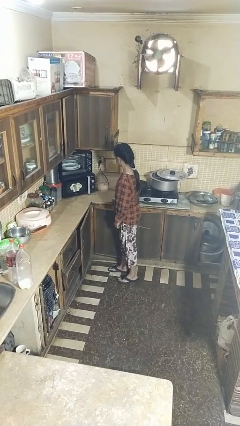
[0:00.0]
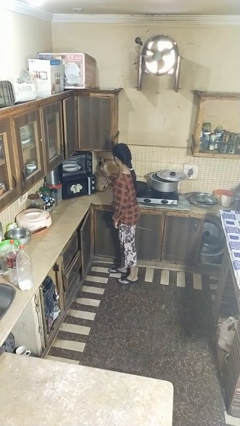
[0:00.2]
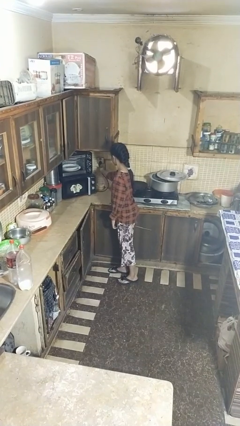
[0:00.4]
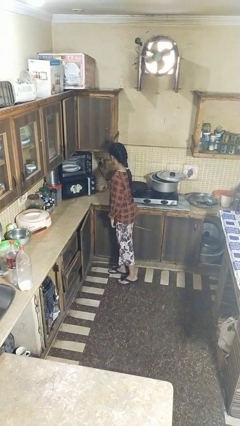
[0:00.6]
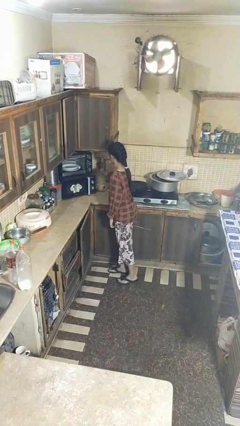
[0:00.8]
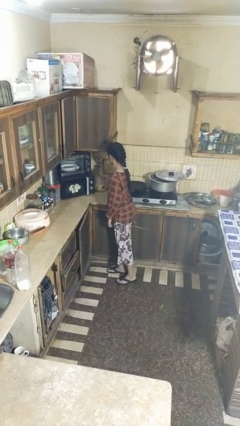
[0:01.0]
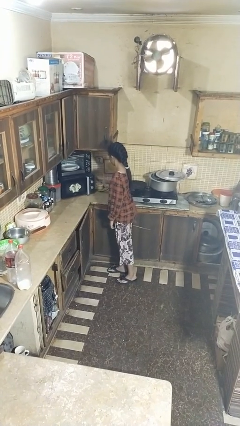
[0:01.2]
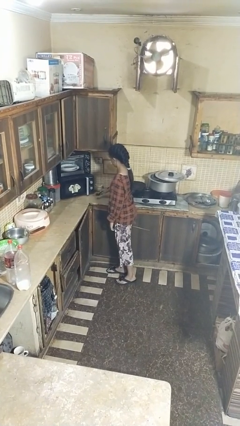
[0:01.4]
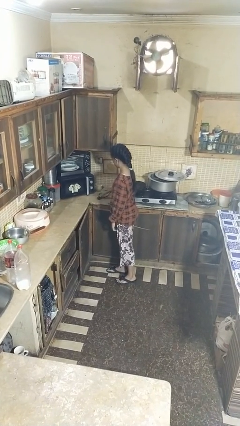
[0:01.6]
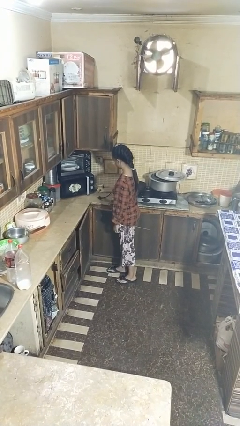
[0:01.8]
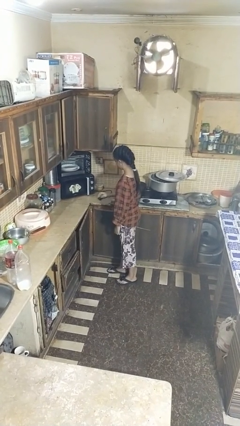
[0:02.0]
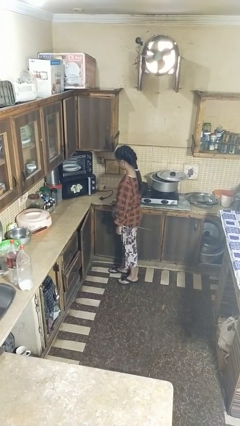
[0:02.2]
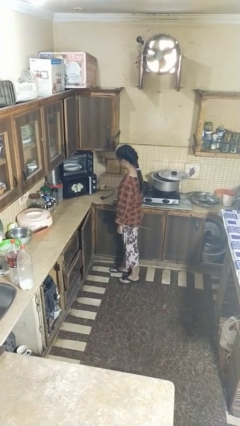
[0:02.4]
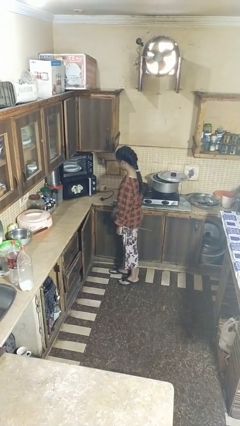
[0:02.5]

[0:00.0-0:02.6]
person unplugs from electrical socket

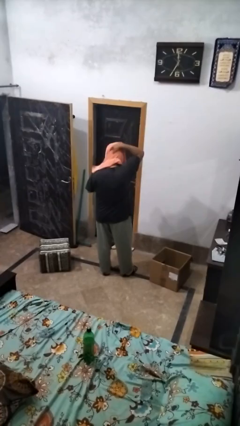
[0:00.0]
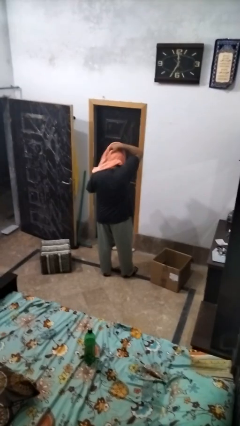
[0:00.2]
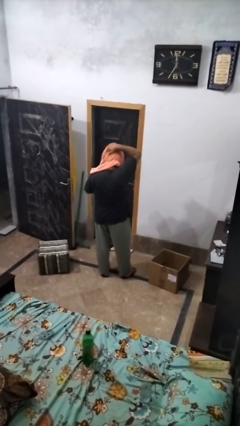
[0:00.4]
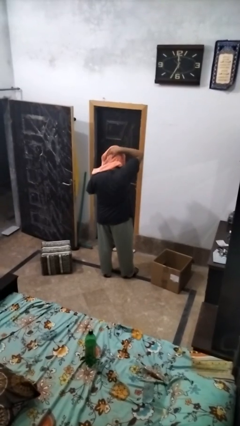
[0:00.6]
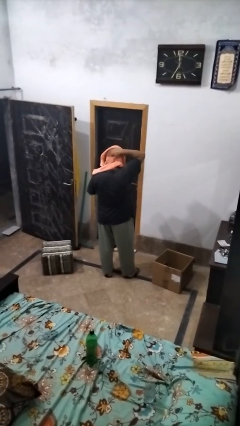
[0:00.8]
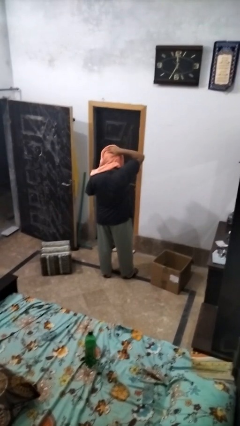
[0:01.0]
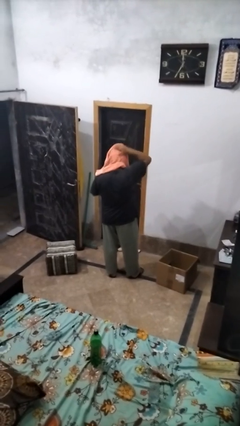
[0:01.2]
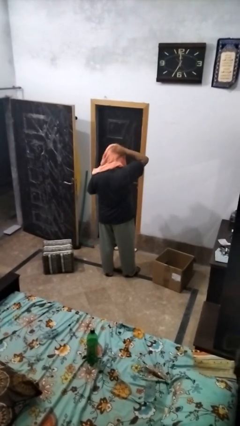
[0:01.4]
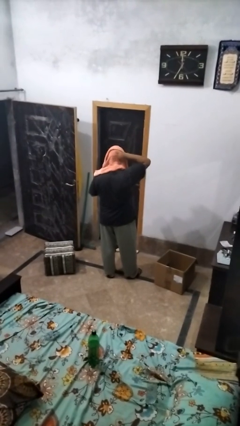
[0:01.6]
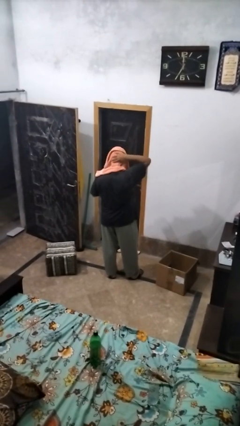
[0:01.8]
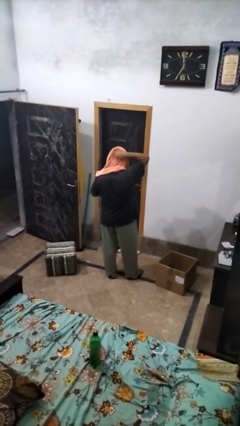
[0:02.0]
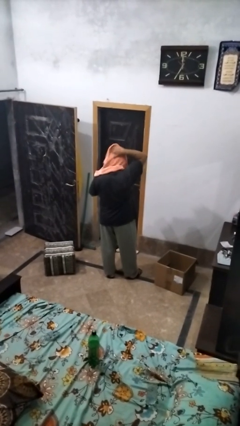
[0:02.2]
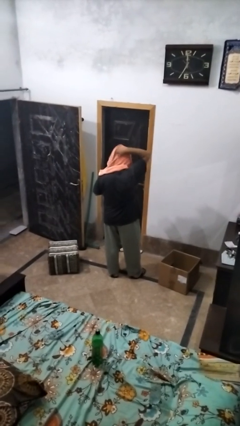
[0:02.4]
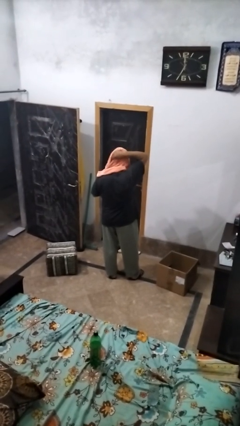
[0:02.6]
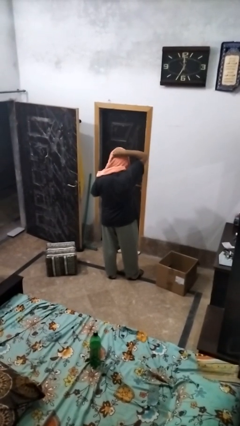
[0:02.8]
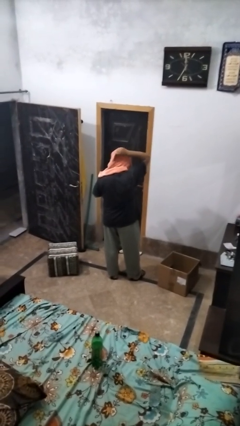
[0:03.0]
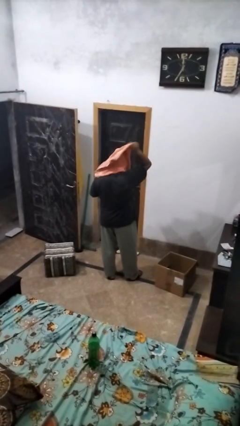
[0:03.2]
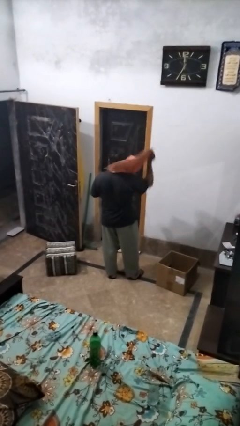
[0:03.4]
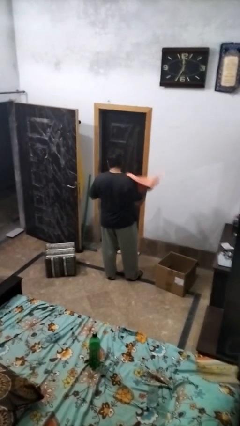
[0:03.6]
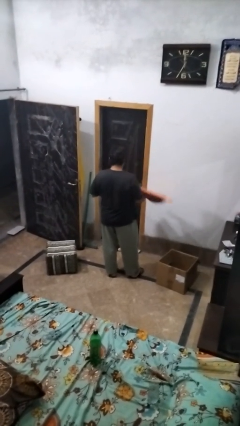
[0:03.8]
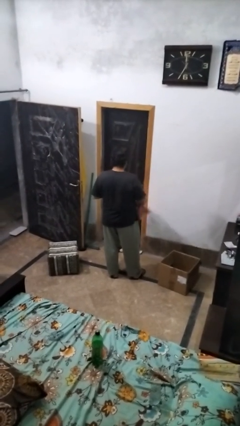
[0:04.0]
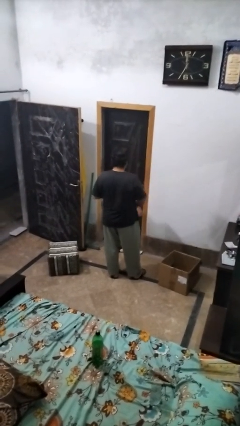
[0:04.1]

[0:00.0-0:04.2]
person dries hair with towel

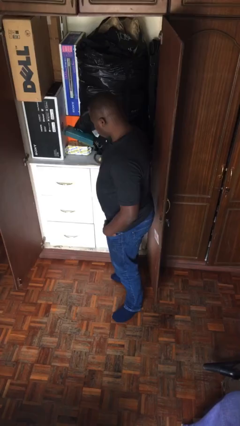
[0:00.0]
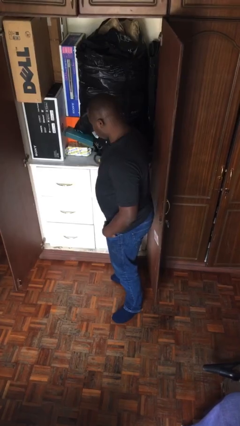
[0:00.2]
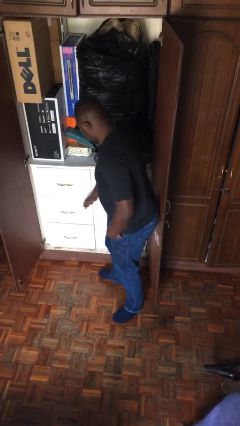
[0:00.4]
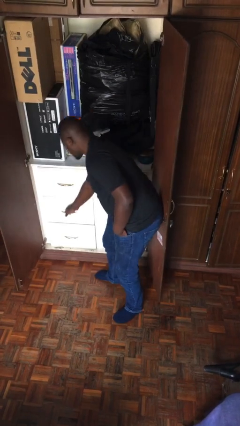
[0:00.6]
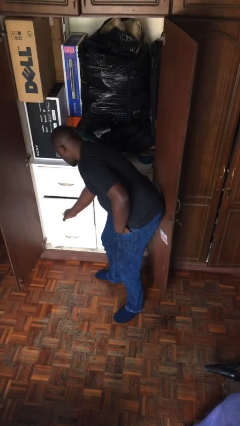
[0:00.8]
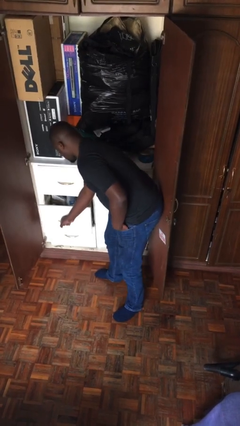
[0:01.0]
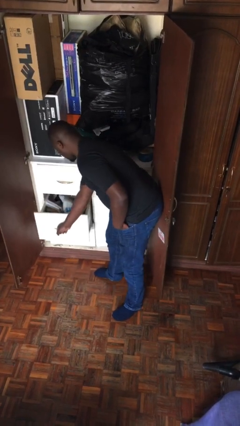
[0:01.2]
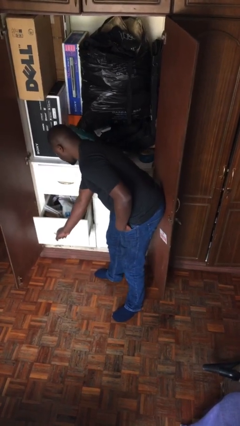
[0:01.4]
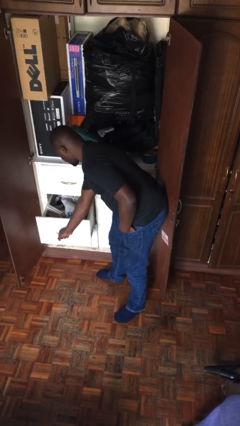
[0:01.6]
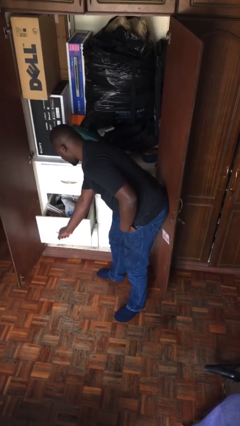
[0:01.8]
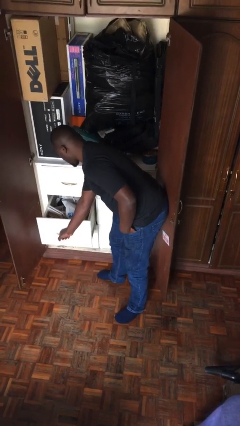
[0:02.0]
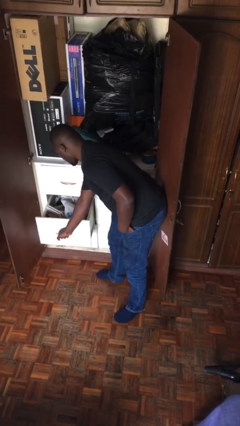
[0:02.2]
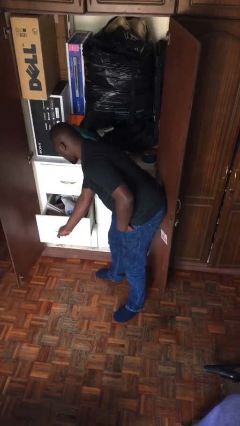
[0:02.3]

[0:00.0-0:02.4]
person opens dresser drawer

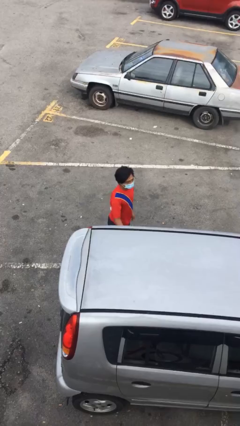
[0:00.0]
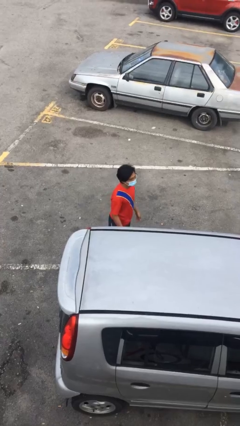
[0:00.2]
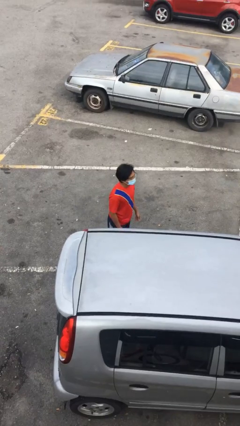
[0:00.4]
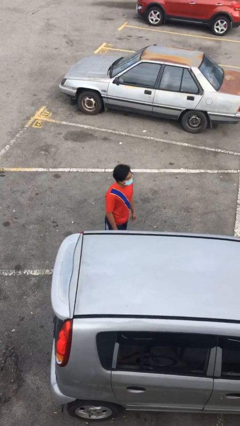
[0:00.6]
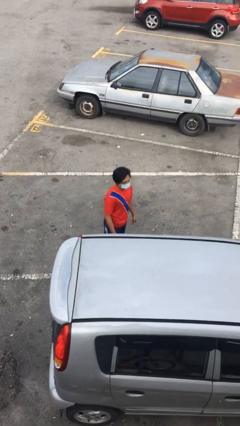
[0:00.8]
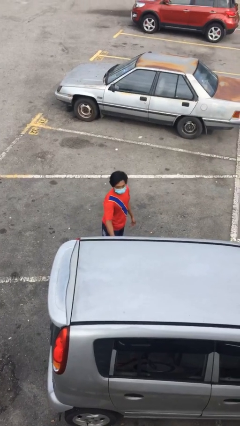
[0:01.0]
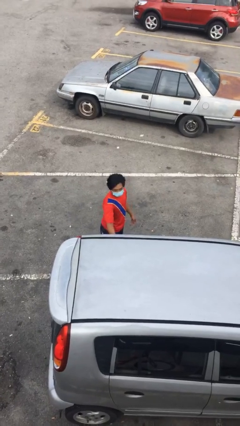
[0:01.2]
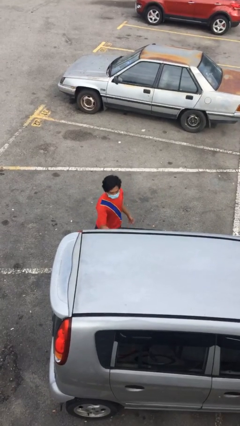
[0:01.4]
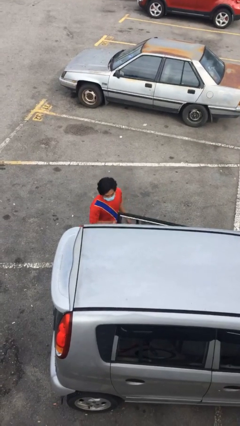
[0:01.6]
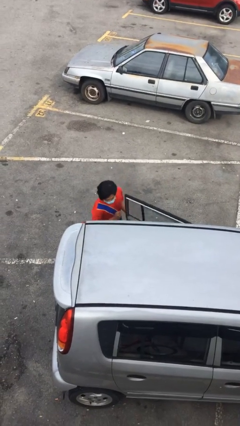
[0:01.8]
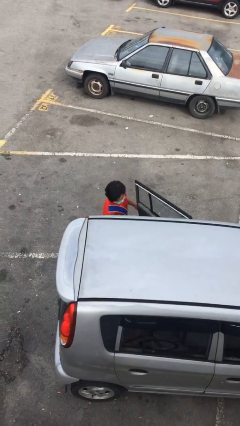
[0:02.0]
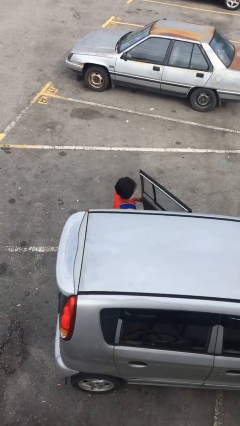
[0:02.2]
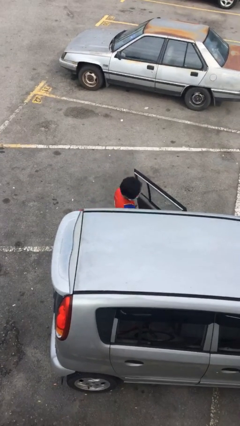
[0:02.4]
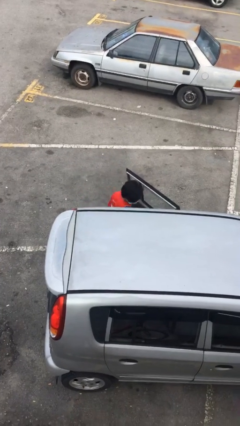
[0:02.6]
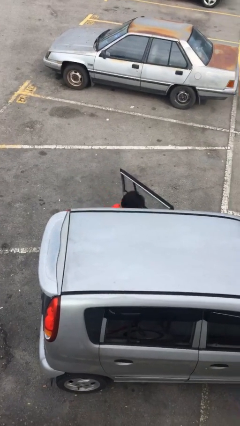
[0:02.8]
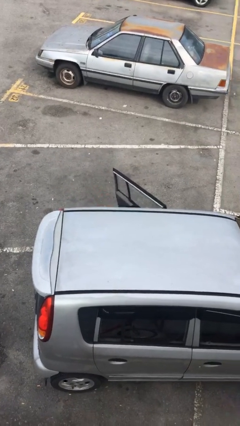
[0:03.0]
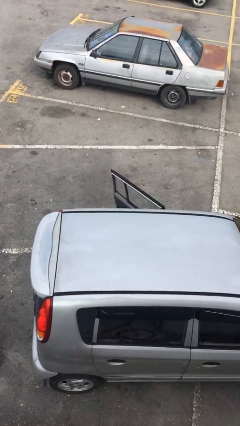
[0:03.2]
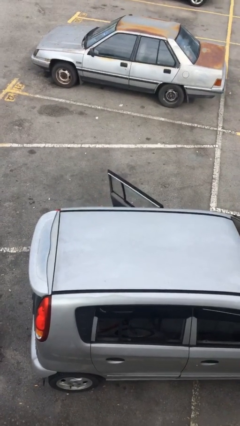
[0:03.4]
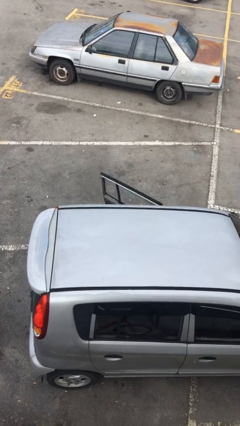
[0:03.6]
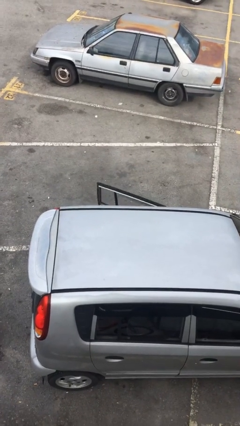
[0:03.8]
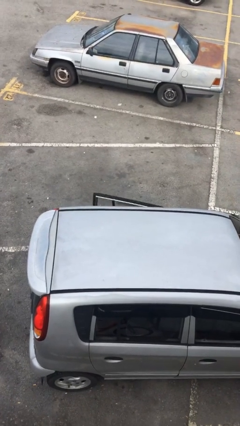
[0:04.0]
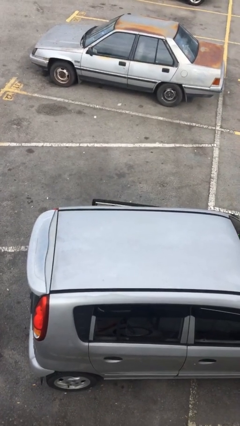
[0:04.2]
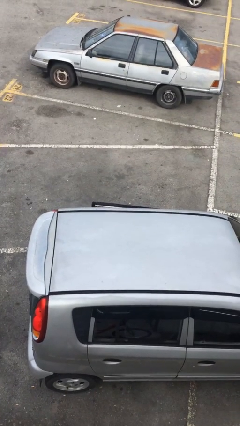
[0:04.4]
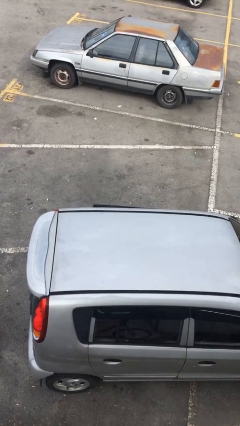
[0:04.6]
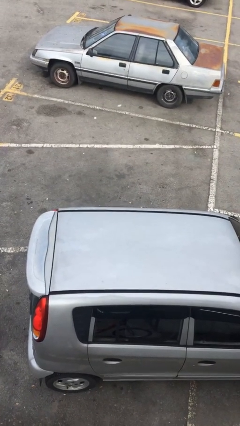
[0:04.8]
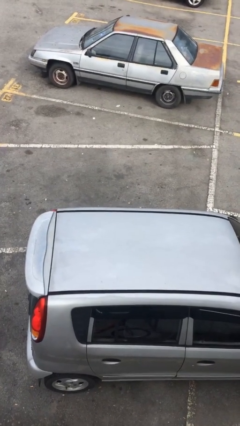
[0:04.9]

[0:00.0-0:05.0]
person enters car

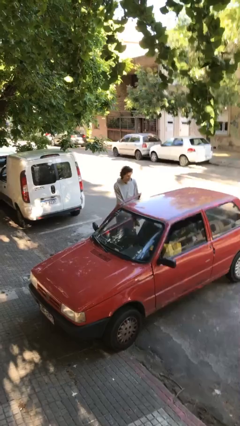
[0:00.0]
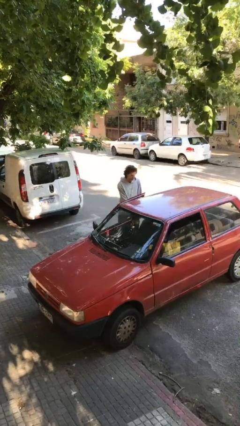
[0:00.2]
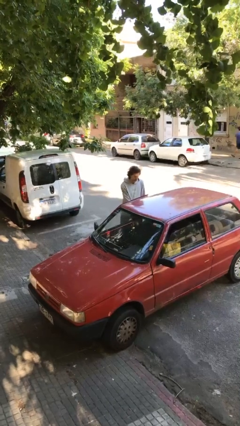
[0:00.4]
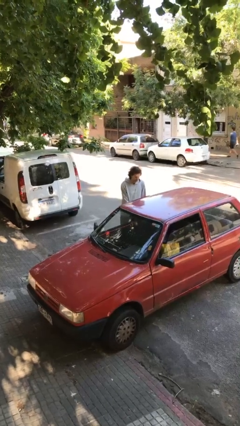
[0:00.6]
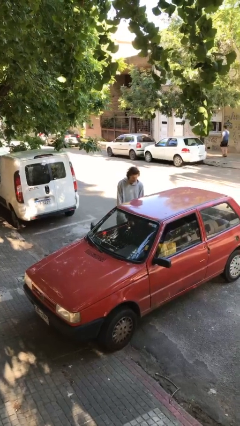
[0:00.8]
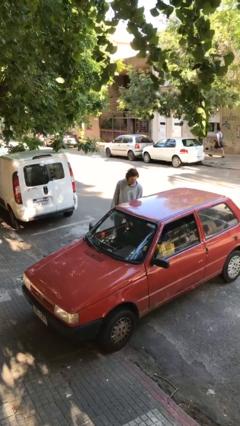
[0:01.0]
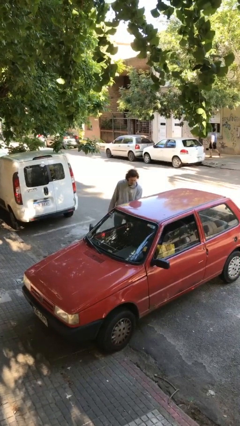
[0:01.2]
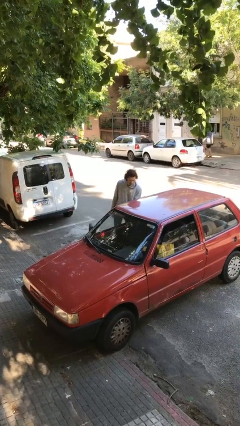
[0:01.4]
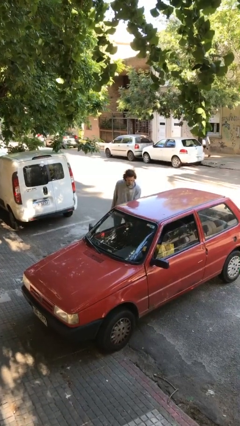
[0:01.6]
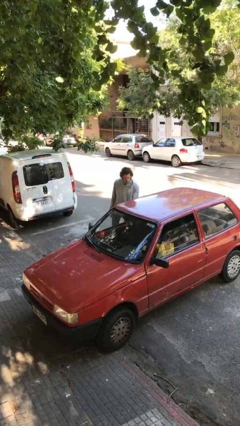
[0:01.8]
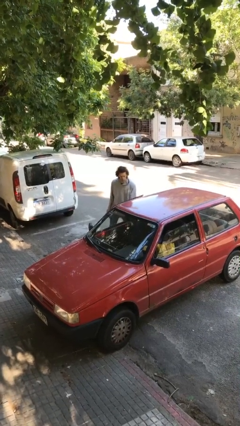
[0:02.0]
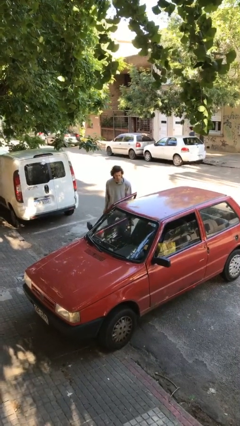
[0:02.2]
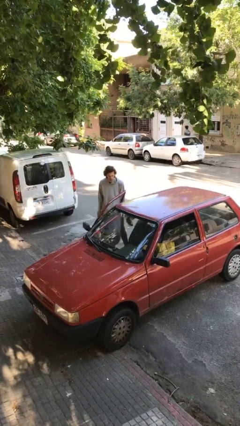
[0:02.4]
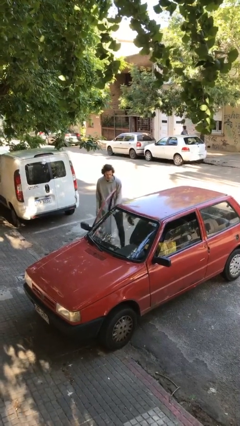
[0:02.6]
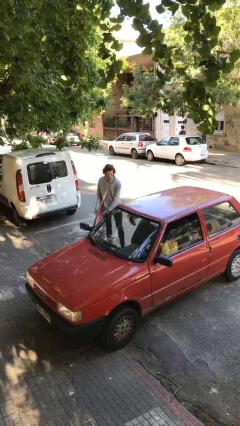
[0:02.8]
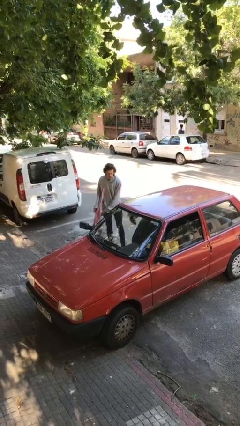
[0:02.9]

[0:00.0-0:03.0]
person closes car door

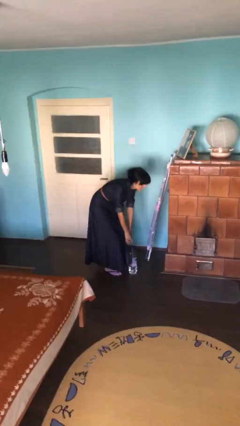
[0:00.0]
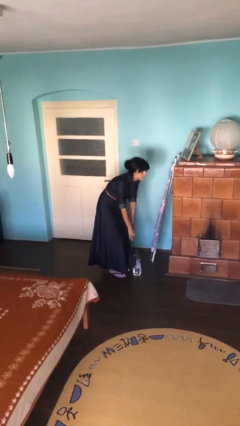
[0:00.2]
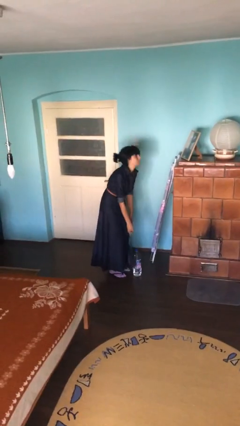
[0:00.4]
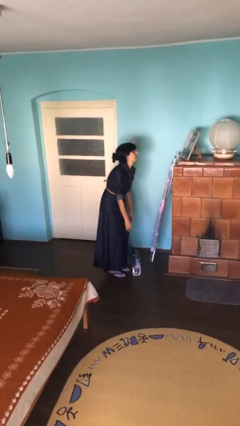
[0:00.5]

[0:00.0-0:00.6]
person puts down object on floor
